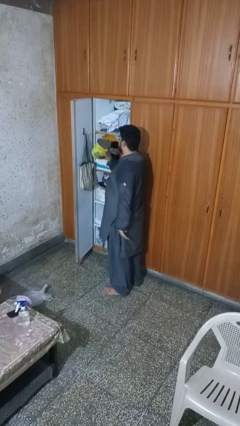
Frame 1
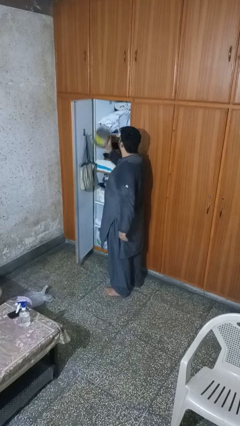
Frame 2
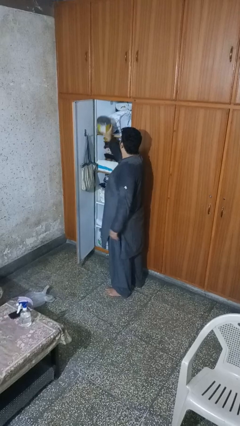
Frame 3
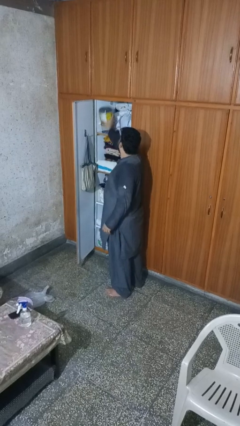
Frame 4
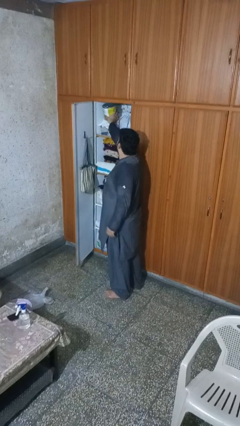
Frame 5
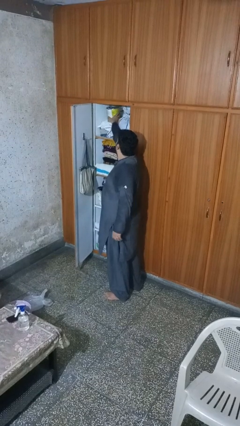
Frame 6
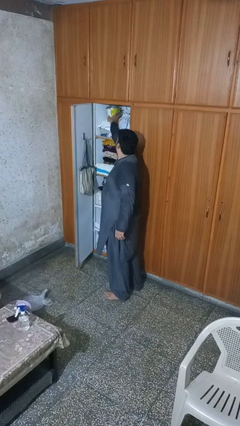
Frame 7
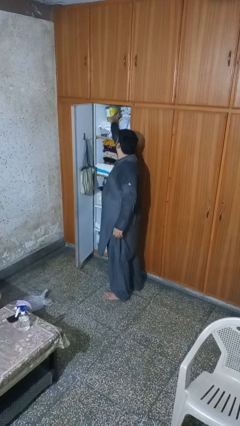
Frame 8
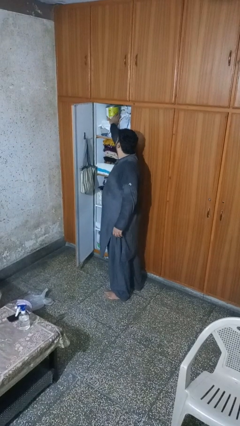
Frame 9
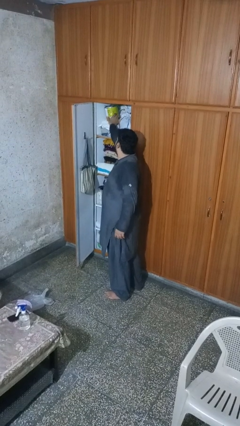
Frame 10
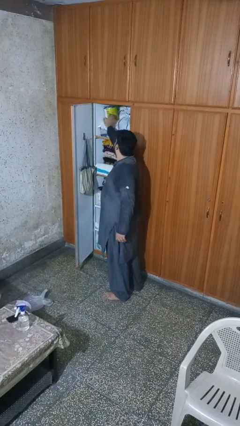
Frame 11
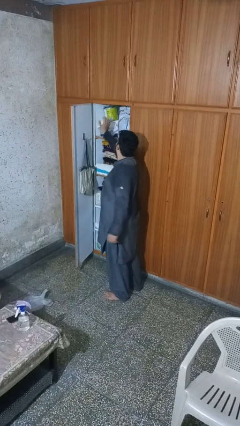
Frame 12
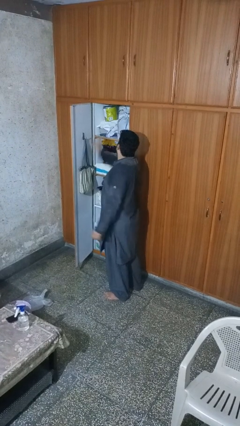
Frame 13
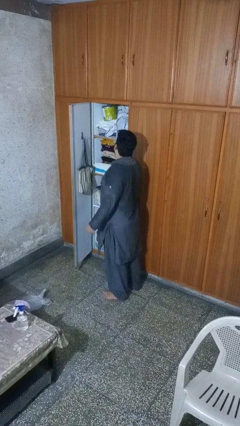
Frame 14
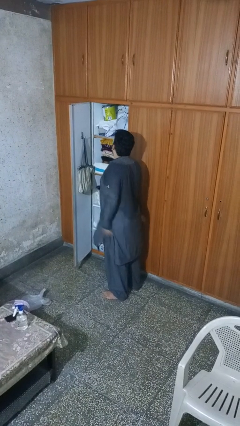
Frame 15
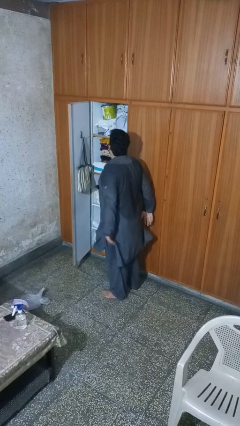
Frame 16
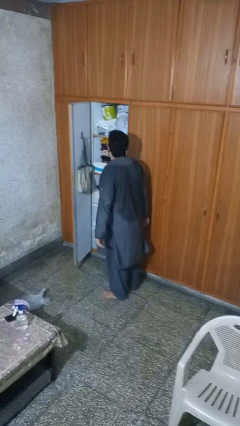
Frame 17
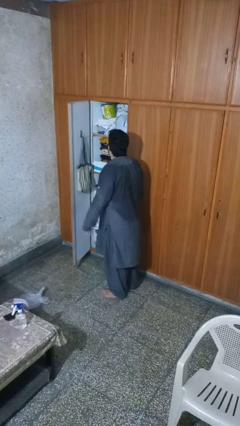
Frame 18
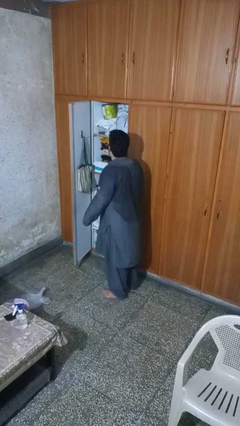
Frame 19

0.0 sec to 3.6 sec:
person puts down object on shelf

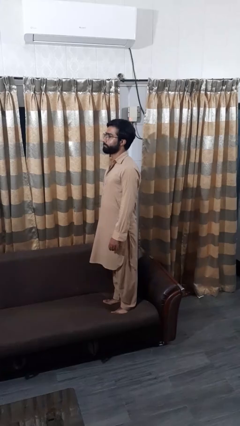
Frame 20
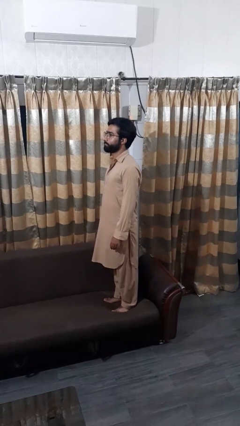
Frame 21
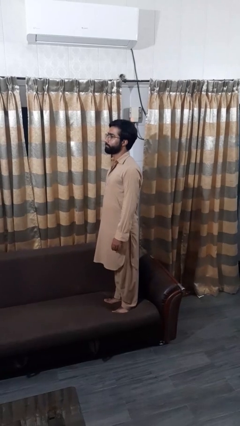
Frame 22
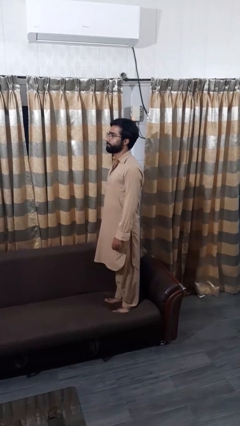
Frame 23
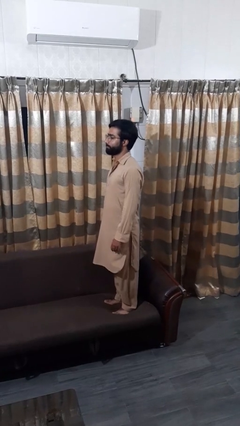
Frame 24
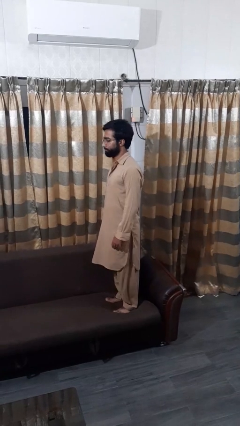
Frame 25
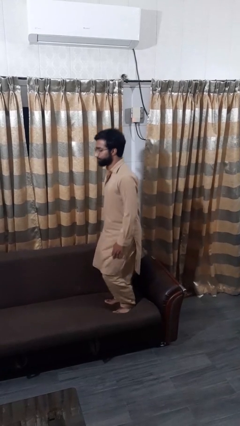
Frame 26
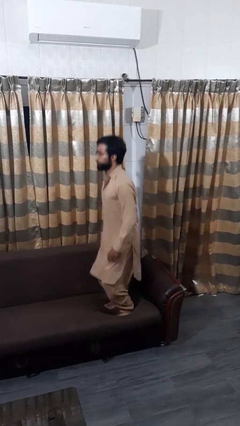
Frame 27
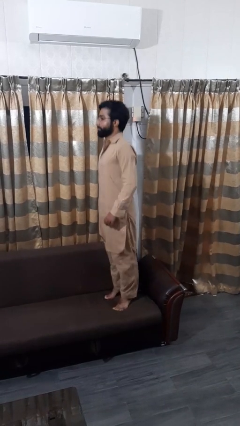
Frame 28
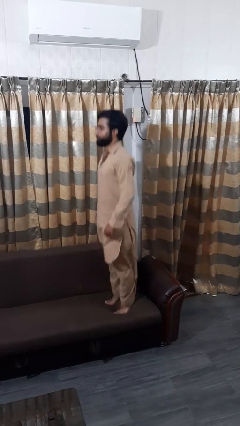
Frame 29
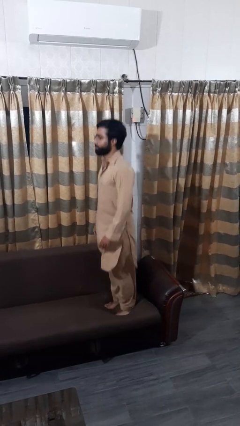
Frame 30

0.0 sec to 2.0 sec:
person jumps on couch

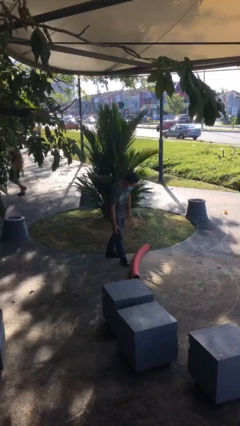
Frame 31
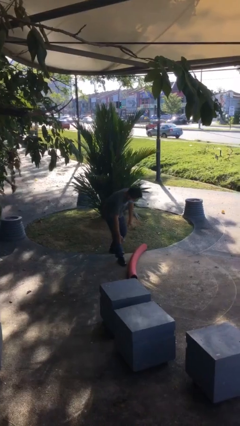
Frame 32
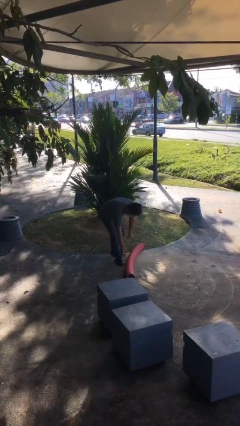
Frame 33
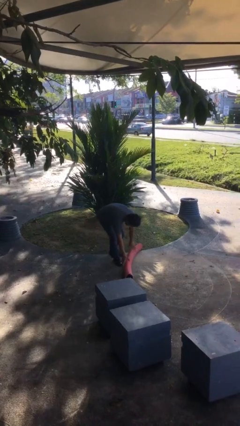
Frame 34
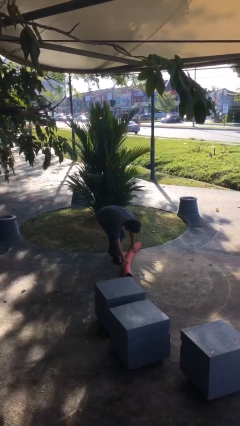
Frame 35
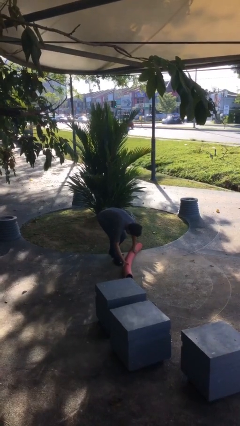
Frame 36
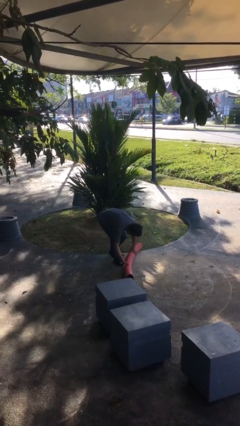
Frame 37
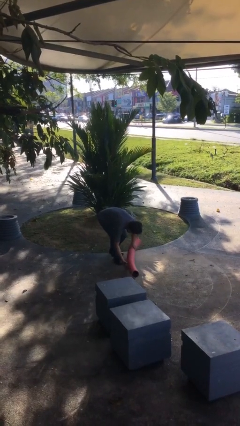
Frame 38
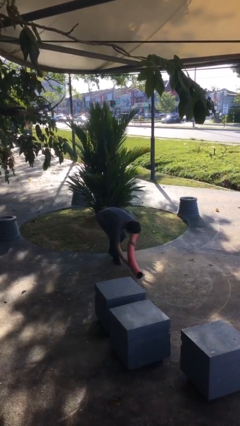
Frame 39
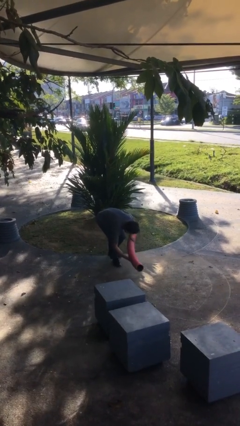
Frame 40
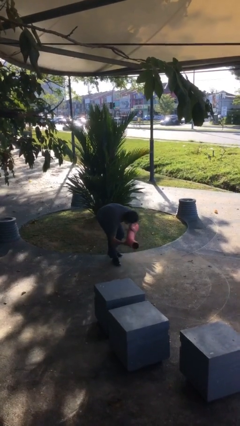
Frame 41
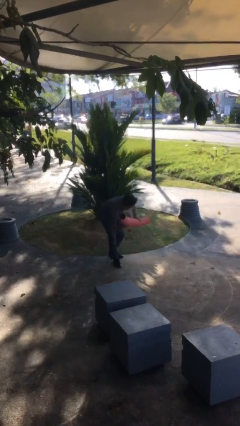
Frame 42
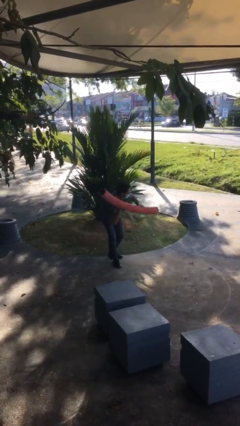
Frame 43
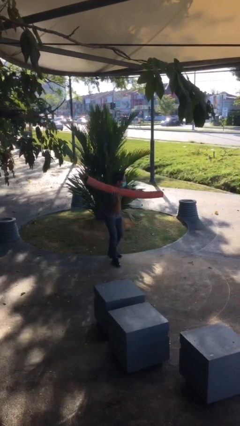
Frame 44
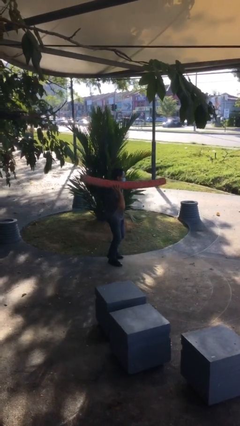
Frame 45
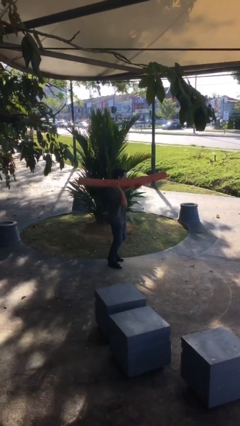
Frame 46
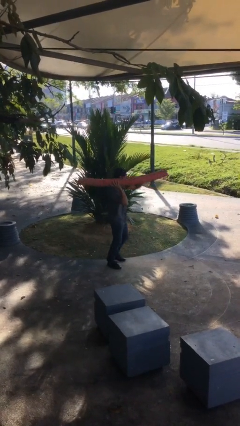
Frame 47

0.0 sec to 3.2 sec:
person picks up object from floor

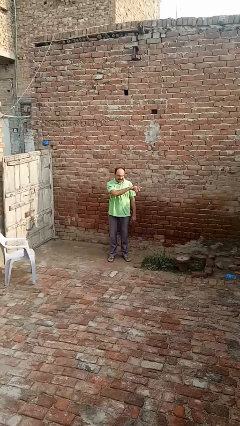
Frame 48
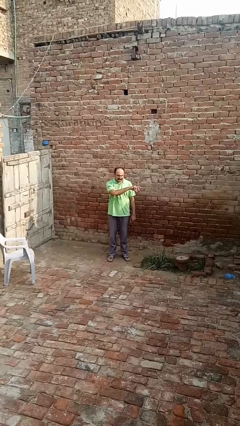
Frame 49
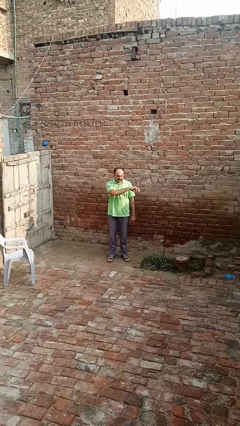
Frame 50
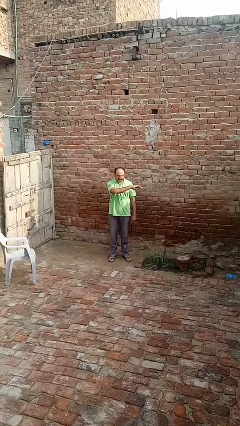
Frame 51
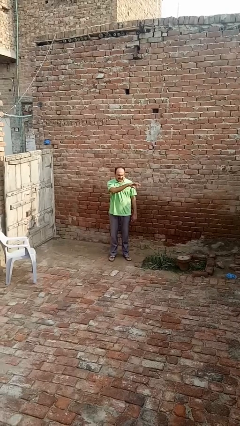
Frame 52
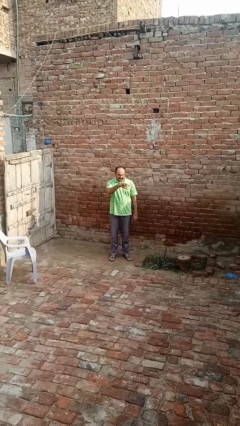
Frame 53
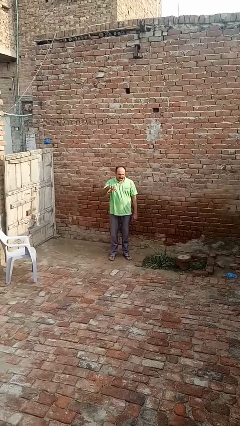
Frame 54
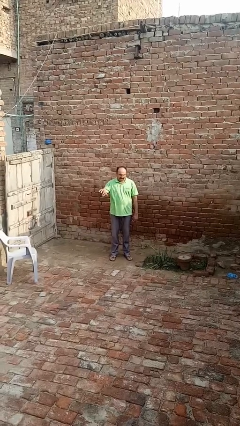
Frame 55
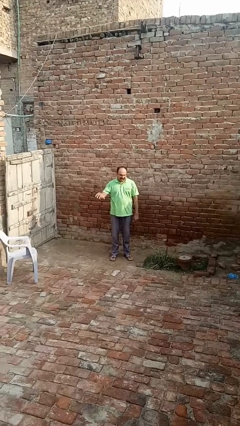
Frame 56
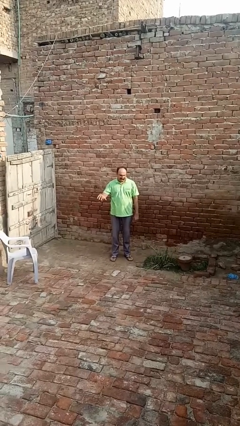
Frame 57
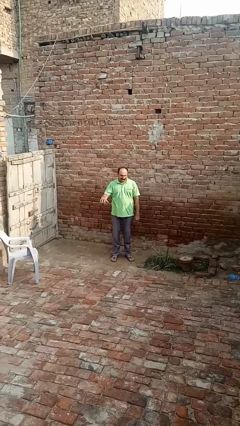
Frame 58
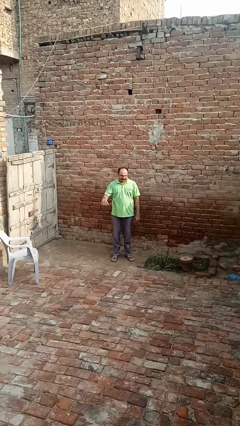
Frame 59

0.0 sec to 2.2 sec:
person gestures swipe right

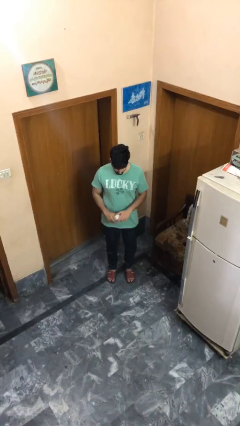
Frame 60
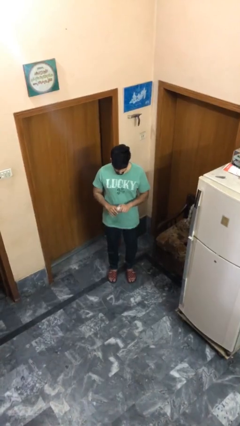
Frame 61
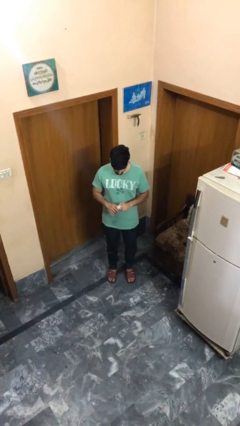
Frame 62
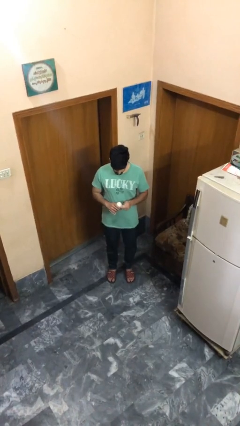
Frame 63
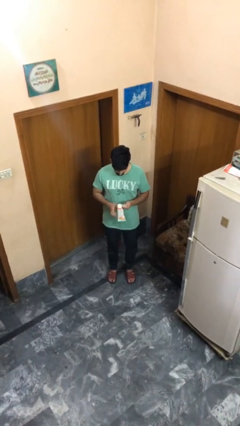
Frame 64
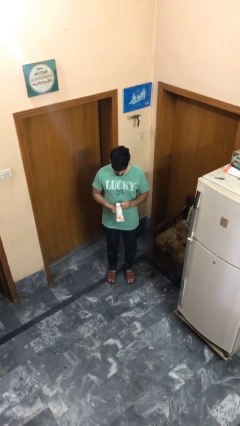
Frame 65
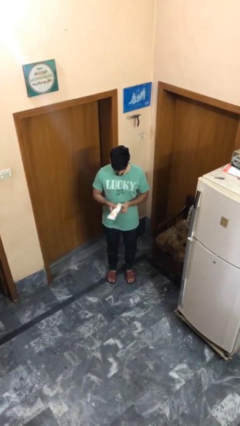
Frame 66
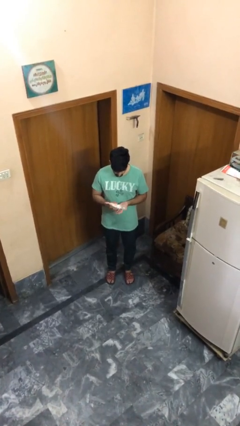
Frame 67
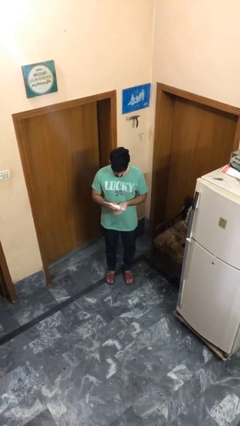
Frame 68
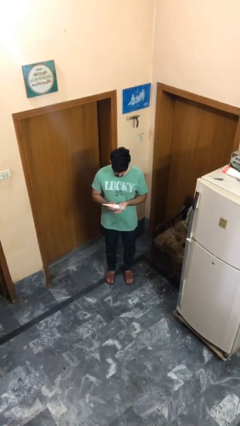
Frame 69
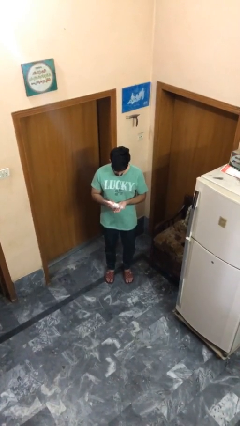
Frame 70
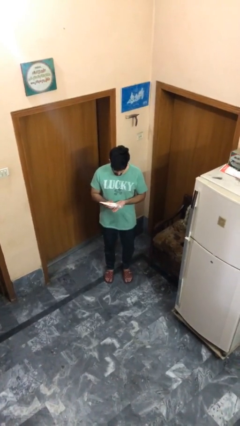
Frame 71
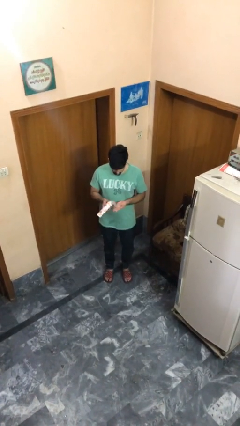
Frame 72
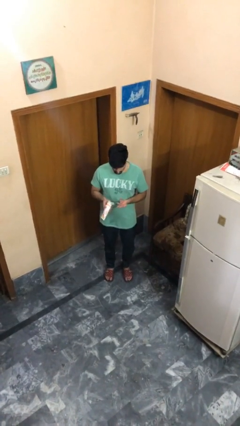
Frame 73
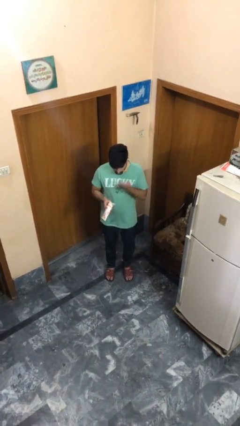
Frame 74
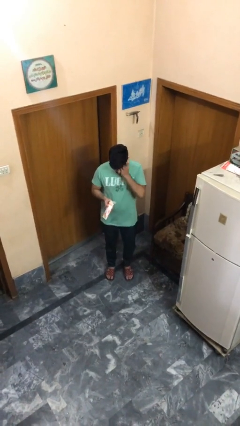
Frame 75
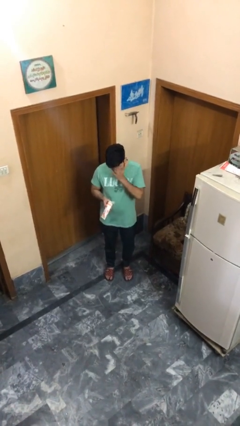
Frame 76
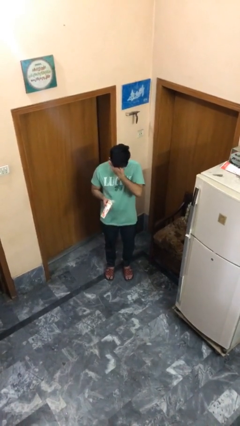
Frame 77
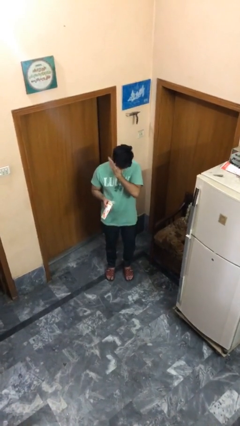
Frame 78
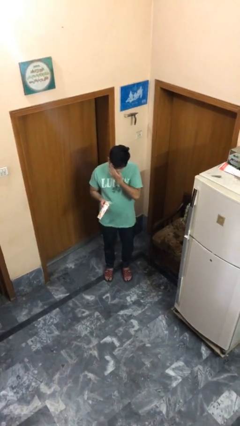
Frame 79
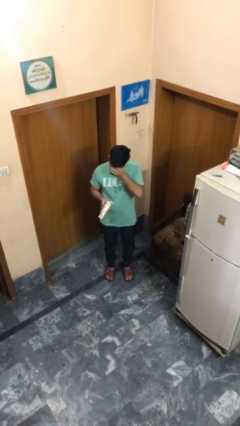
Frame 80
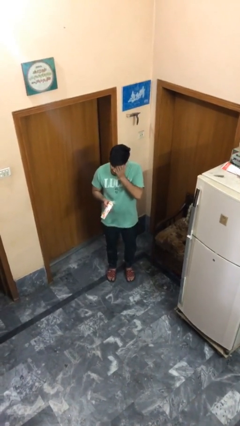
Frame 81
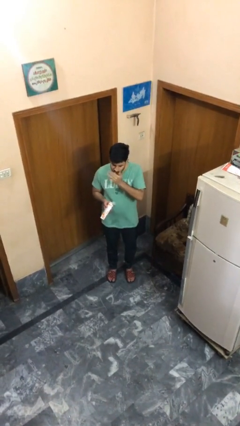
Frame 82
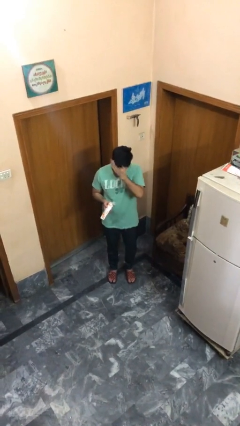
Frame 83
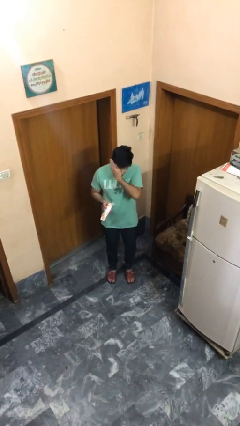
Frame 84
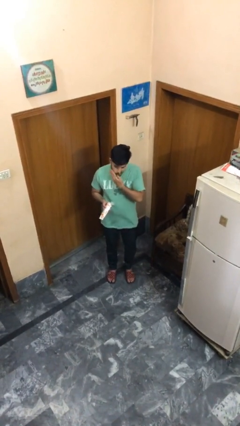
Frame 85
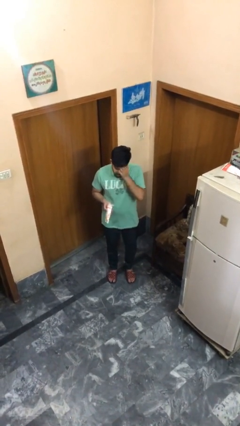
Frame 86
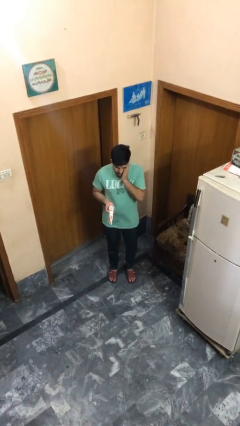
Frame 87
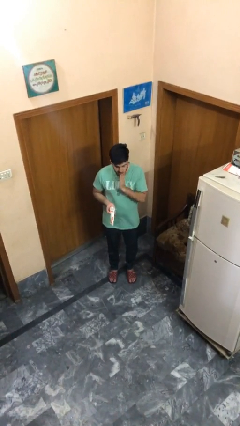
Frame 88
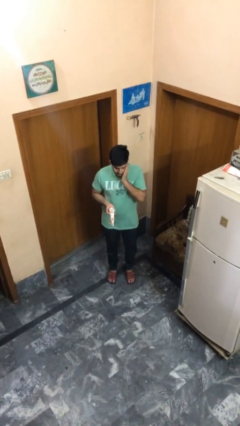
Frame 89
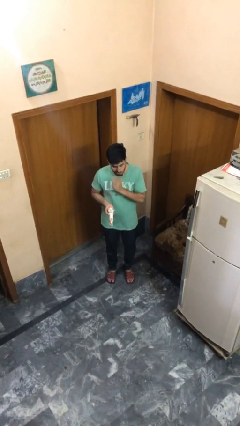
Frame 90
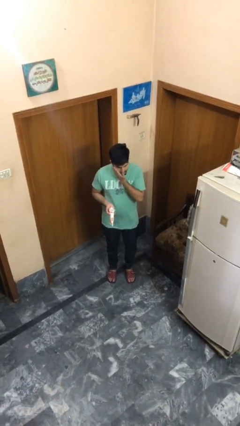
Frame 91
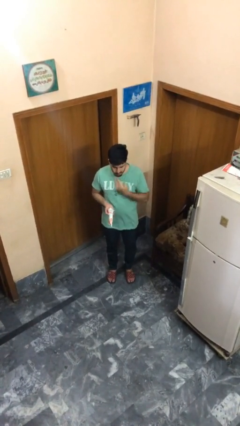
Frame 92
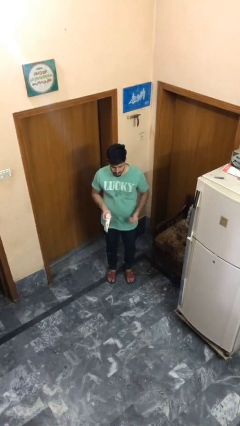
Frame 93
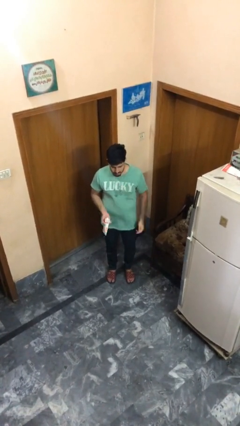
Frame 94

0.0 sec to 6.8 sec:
person applies sunscreen
